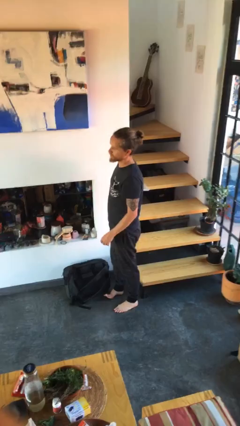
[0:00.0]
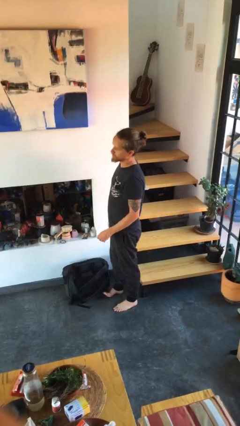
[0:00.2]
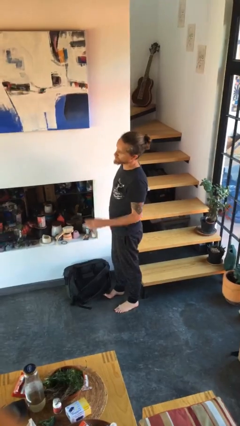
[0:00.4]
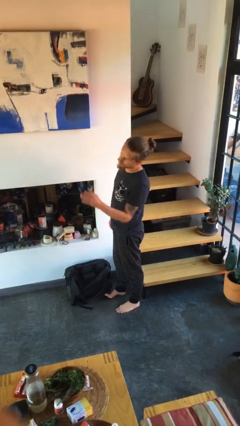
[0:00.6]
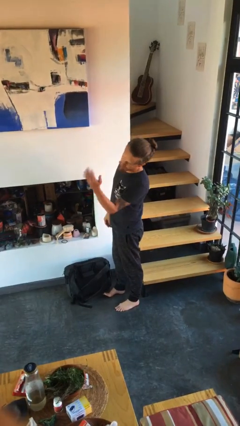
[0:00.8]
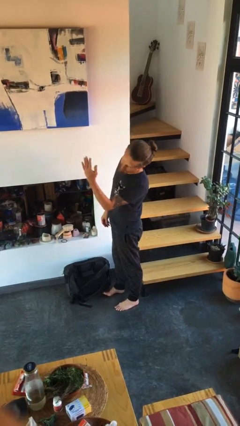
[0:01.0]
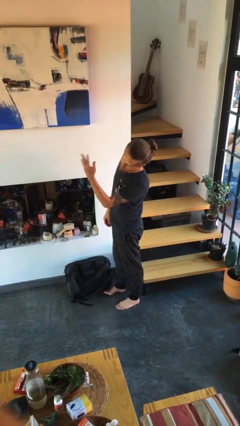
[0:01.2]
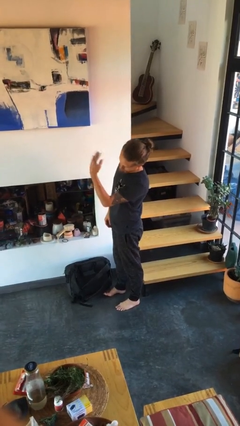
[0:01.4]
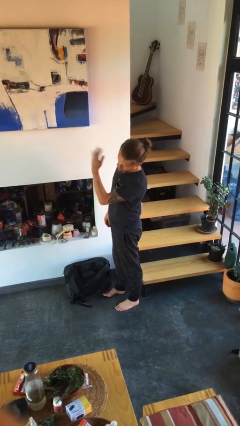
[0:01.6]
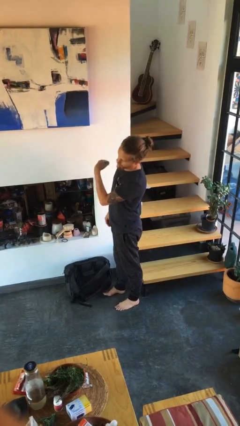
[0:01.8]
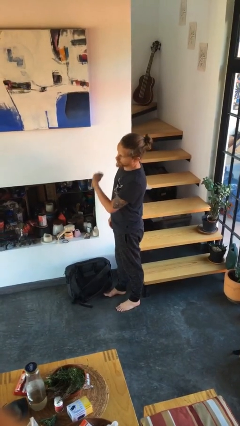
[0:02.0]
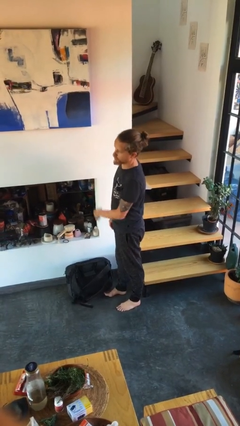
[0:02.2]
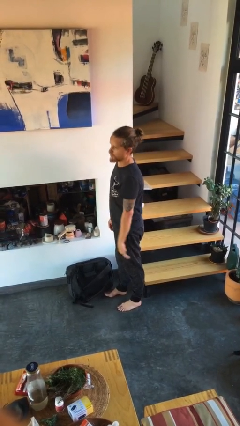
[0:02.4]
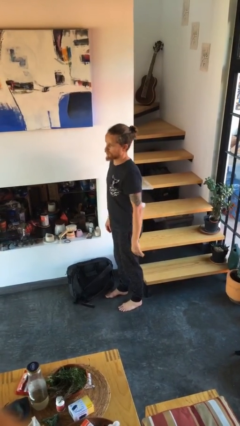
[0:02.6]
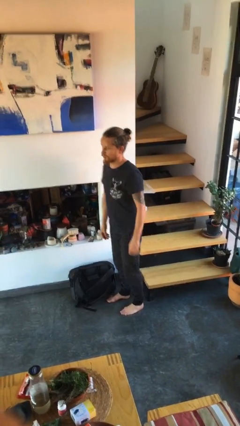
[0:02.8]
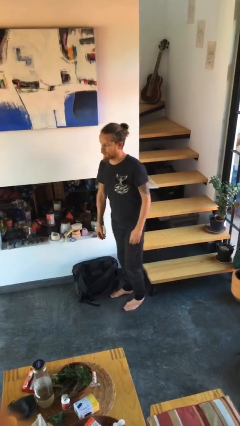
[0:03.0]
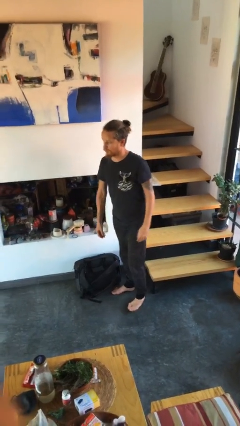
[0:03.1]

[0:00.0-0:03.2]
person gestures come here

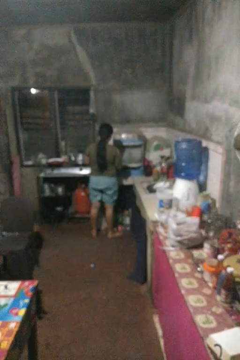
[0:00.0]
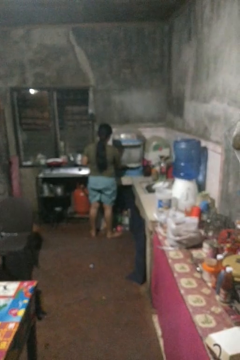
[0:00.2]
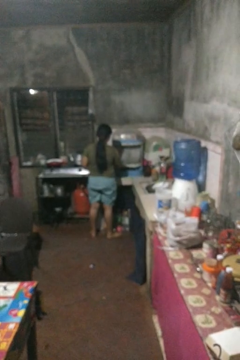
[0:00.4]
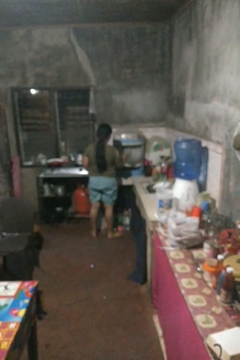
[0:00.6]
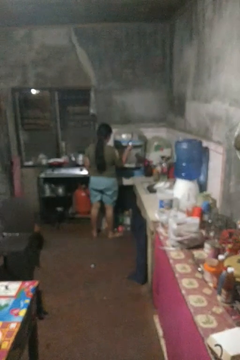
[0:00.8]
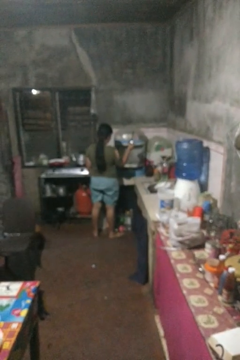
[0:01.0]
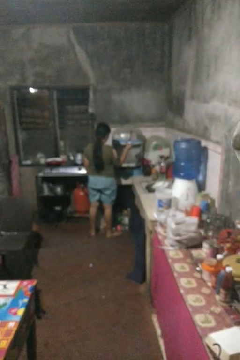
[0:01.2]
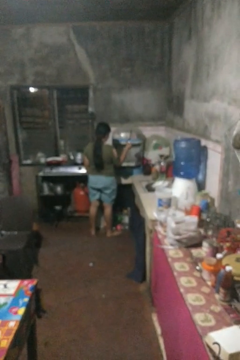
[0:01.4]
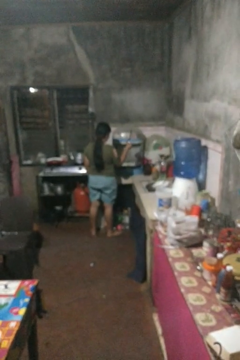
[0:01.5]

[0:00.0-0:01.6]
person takes object from kitchen drawer

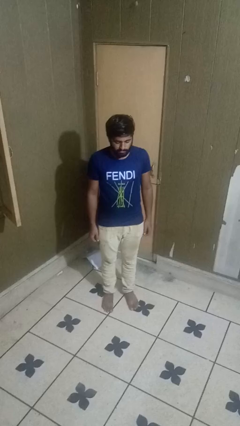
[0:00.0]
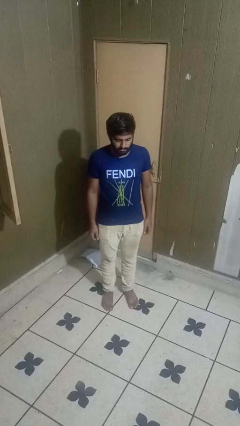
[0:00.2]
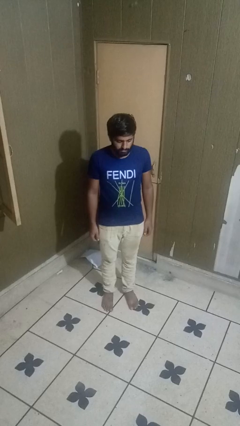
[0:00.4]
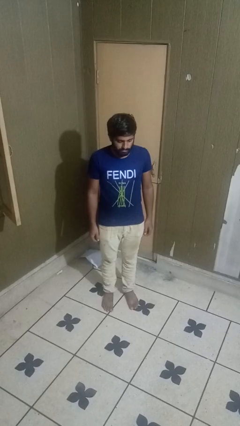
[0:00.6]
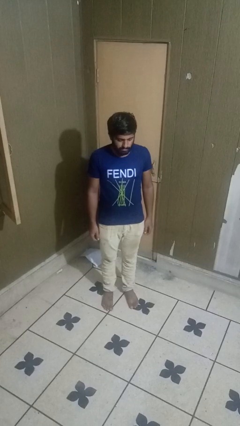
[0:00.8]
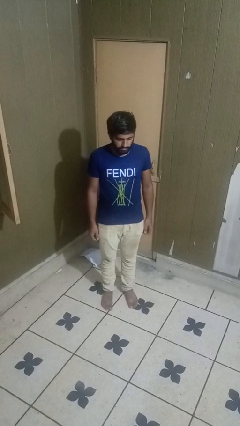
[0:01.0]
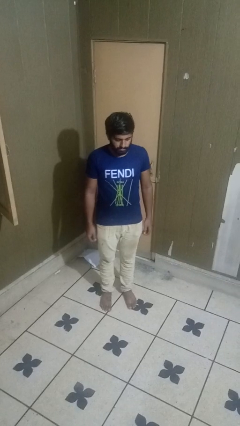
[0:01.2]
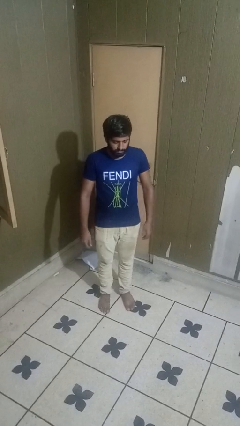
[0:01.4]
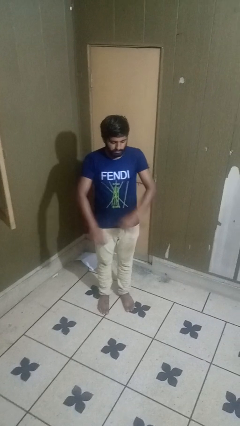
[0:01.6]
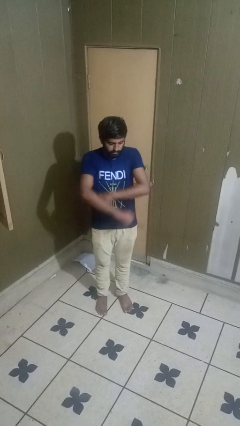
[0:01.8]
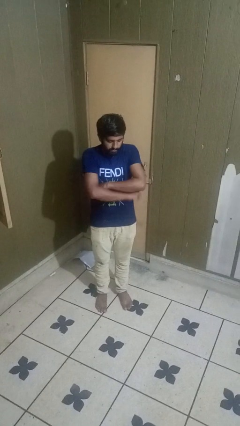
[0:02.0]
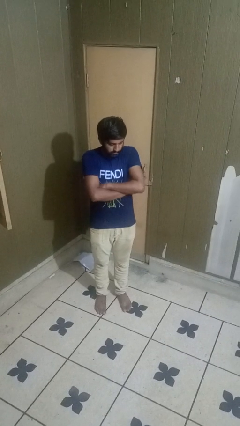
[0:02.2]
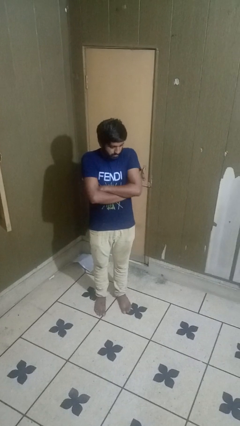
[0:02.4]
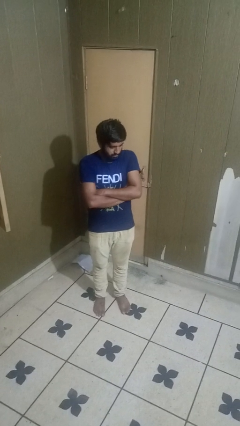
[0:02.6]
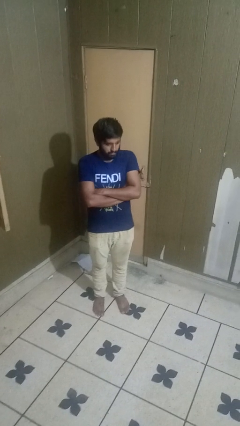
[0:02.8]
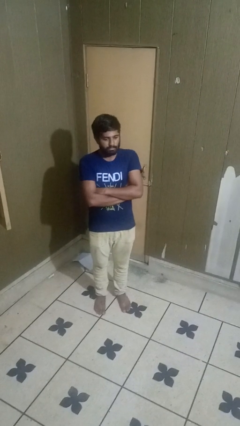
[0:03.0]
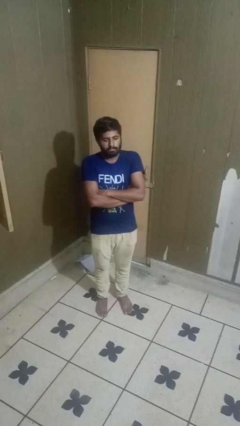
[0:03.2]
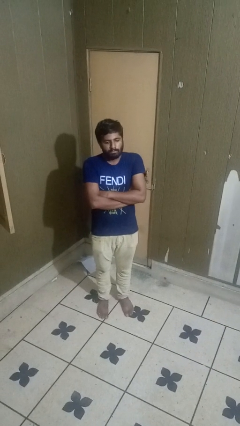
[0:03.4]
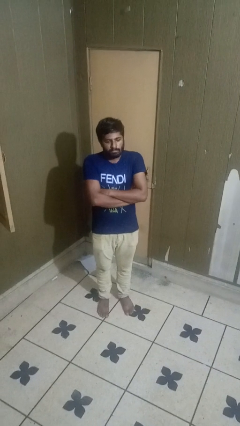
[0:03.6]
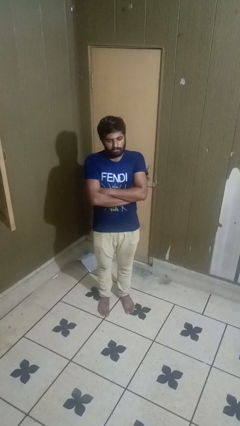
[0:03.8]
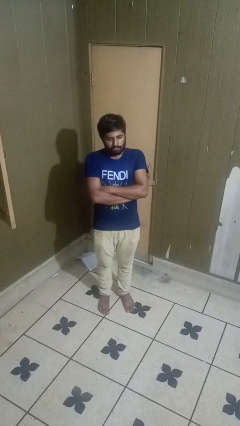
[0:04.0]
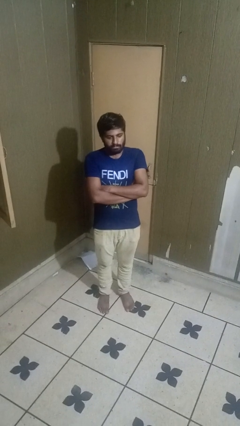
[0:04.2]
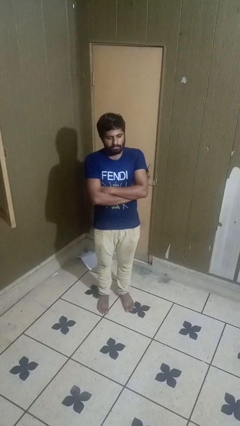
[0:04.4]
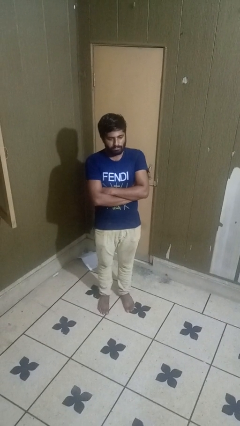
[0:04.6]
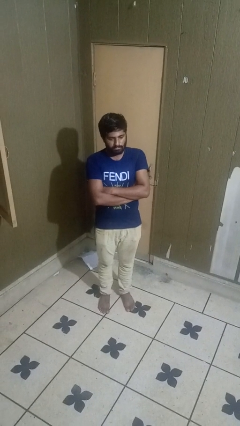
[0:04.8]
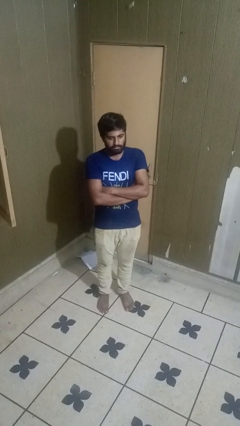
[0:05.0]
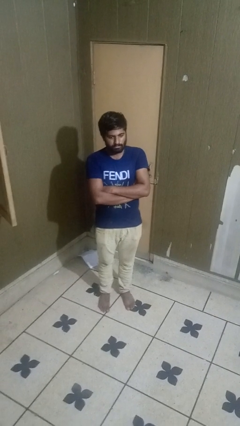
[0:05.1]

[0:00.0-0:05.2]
person crosses arms

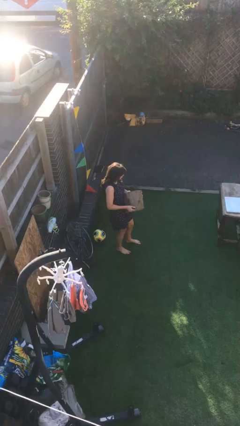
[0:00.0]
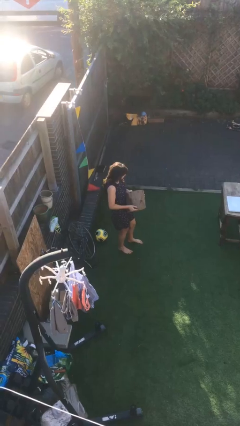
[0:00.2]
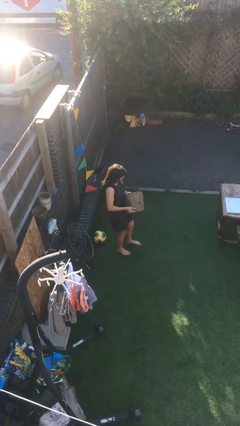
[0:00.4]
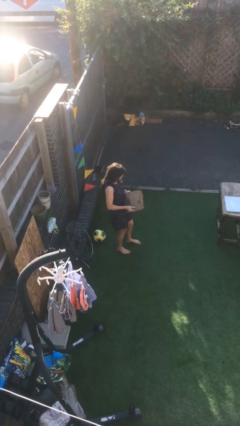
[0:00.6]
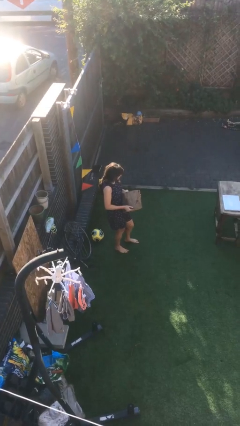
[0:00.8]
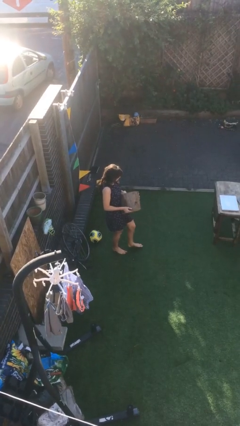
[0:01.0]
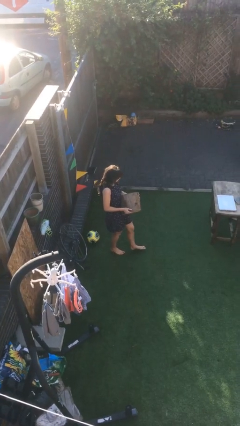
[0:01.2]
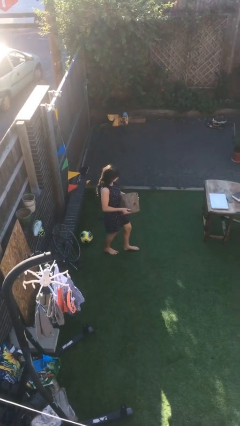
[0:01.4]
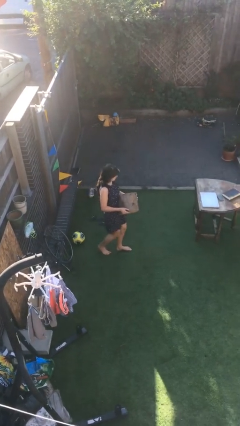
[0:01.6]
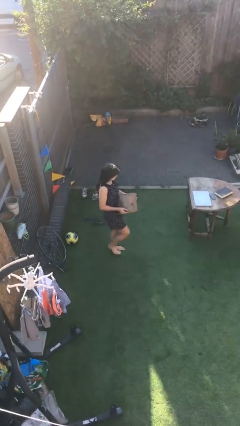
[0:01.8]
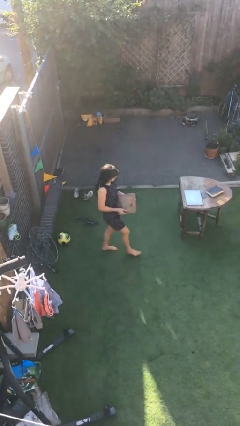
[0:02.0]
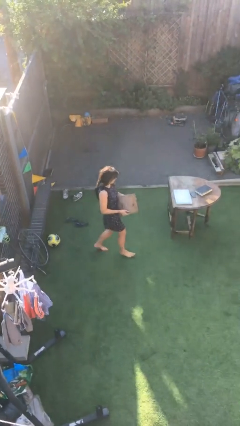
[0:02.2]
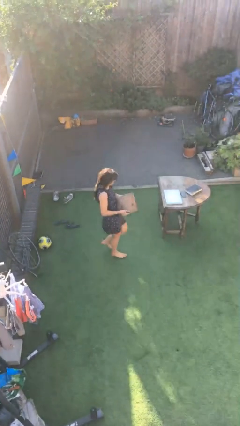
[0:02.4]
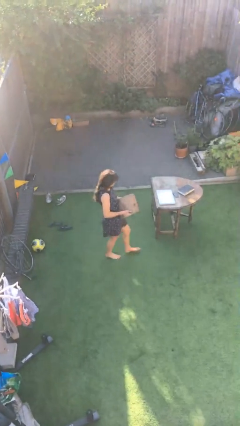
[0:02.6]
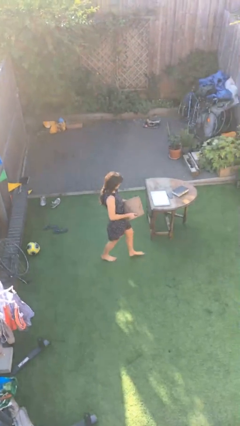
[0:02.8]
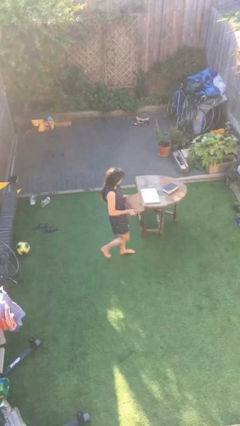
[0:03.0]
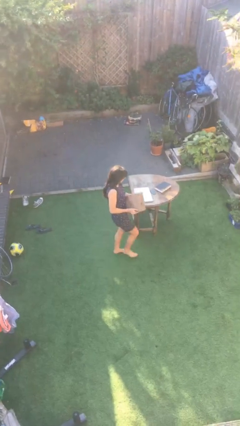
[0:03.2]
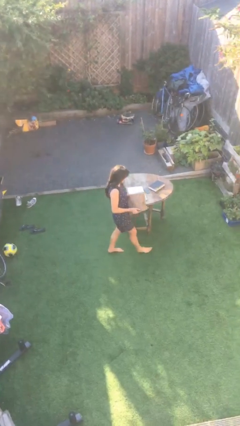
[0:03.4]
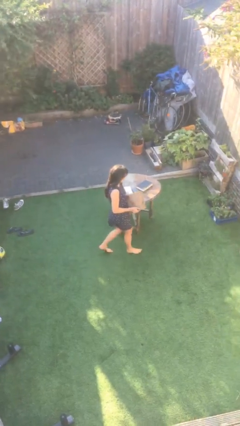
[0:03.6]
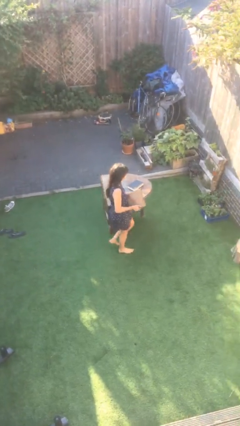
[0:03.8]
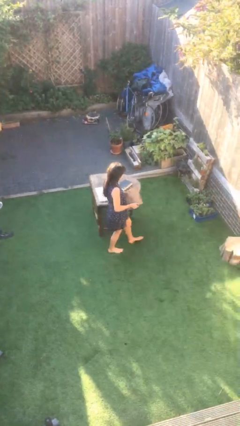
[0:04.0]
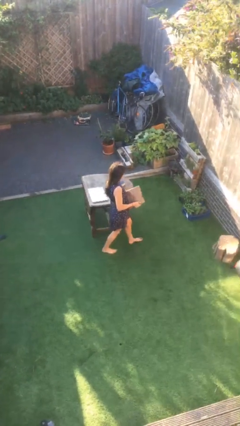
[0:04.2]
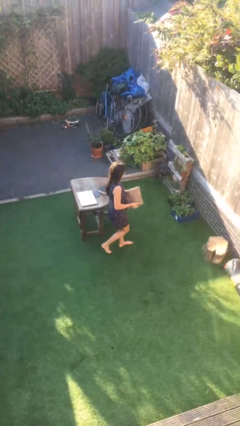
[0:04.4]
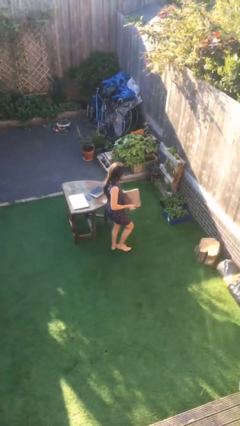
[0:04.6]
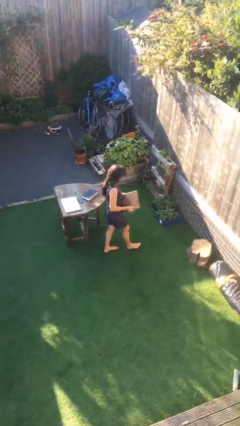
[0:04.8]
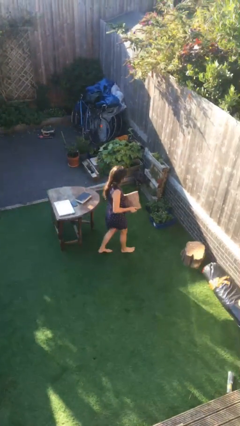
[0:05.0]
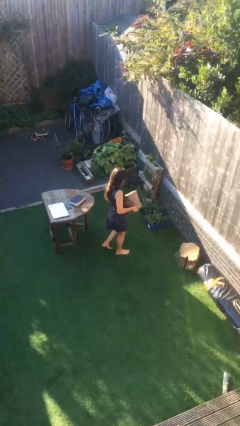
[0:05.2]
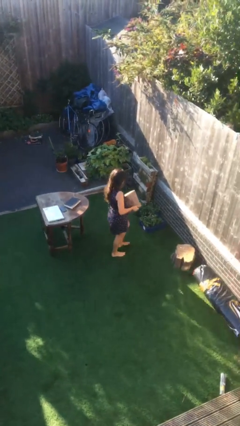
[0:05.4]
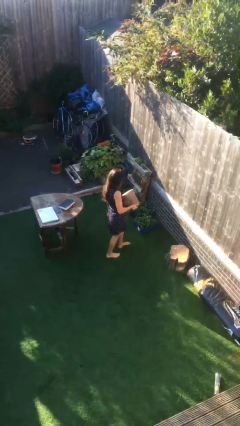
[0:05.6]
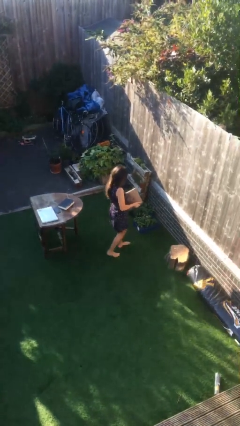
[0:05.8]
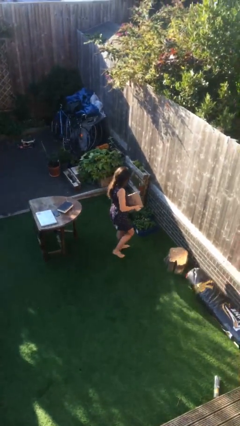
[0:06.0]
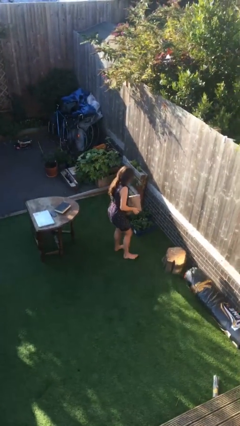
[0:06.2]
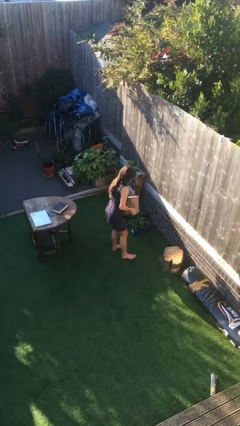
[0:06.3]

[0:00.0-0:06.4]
person carries heavy object

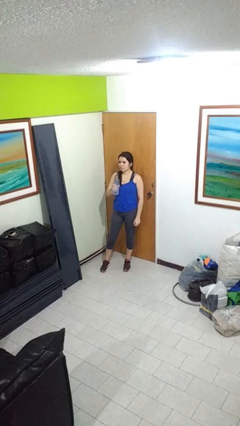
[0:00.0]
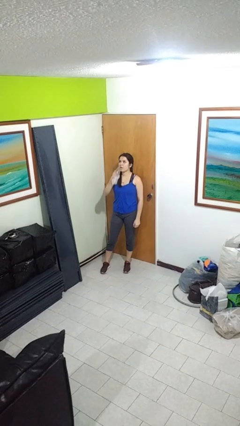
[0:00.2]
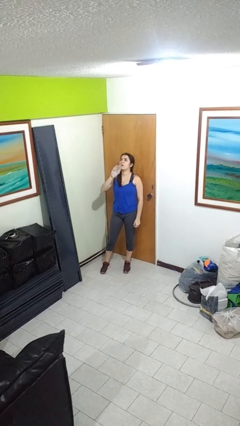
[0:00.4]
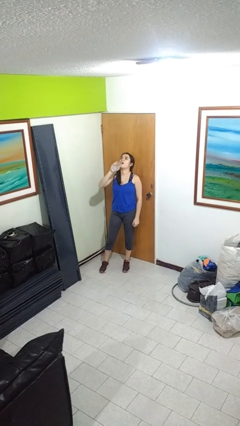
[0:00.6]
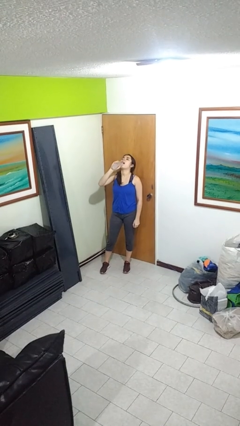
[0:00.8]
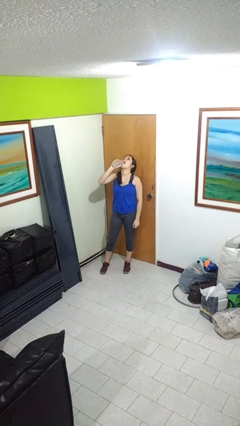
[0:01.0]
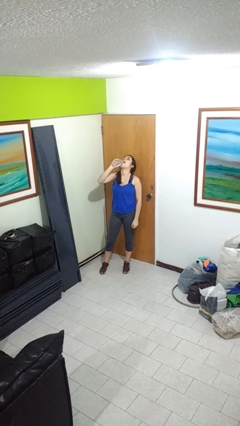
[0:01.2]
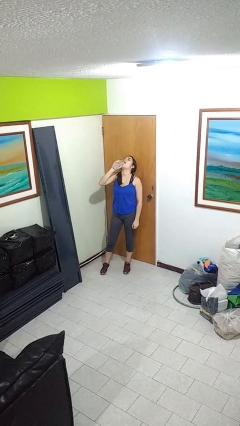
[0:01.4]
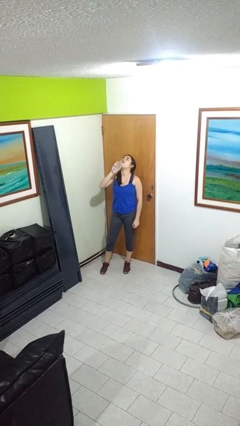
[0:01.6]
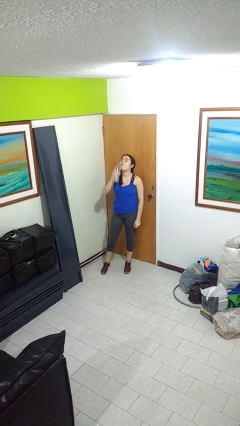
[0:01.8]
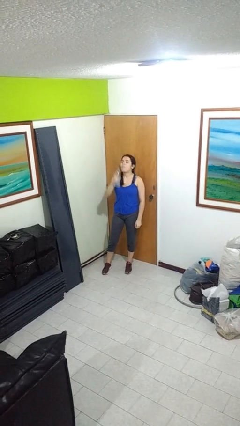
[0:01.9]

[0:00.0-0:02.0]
person drinks from bottle
